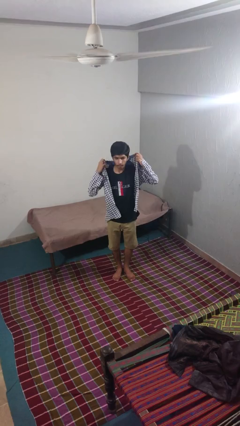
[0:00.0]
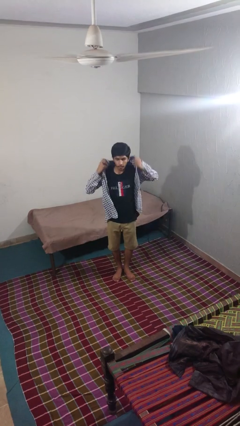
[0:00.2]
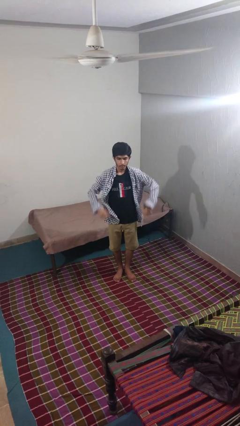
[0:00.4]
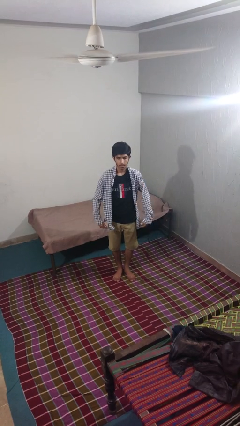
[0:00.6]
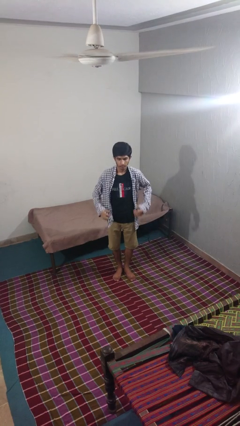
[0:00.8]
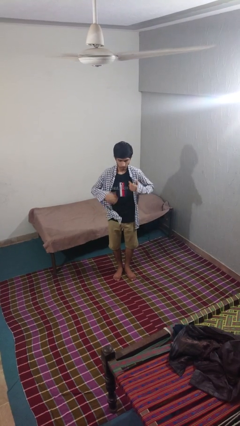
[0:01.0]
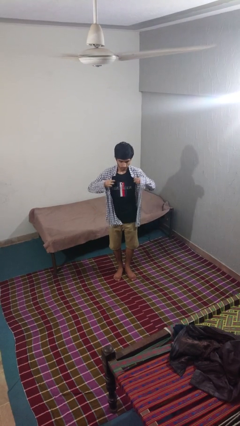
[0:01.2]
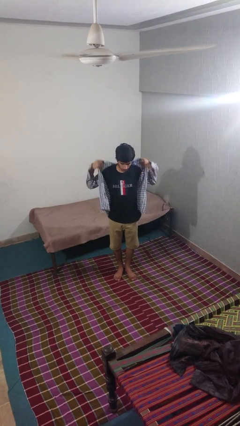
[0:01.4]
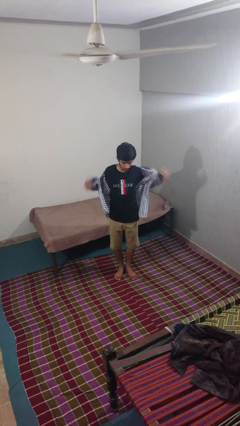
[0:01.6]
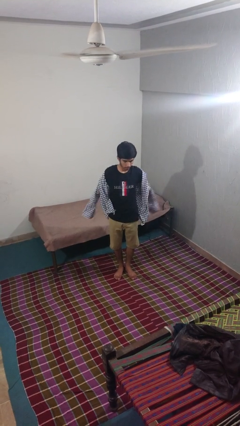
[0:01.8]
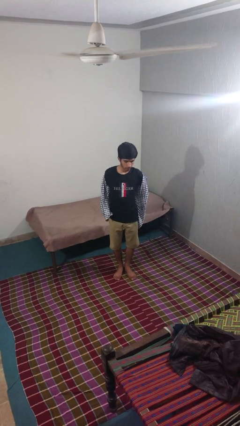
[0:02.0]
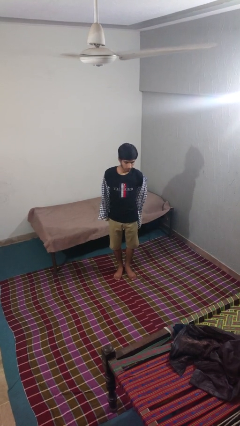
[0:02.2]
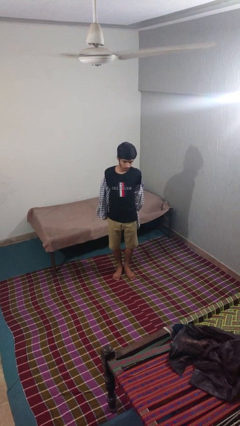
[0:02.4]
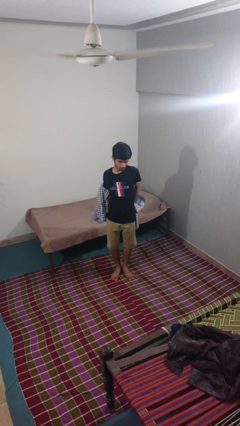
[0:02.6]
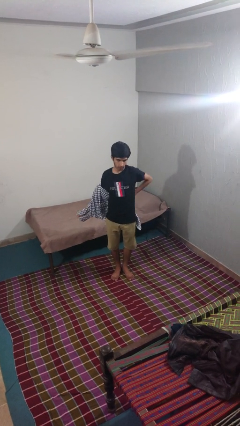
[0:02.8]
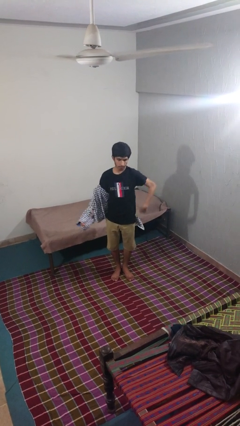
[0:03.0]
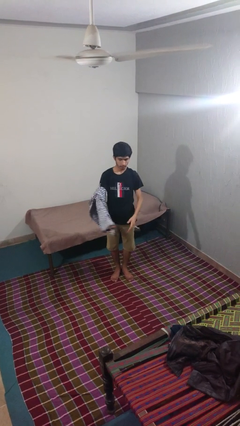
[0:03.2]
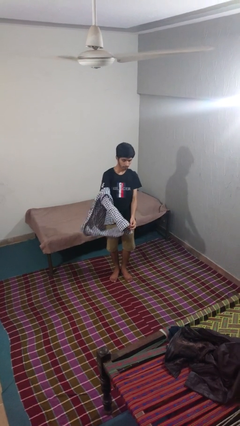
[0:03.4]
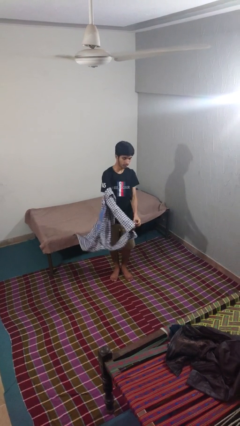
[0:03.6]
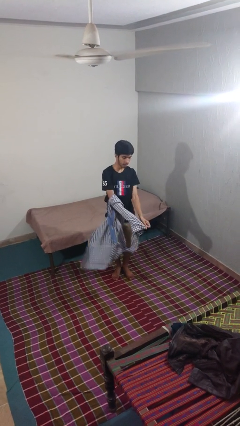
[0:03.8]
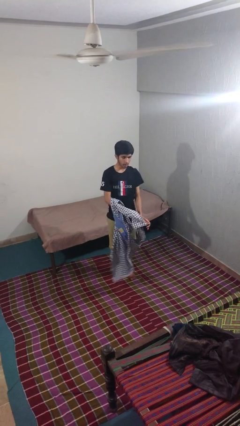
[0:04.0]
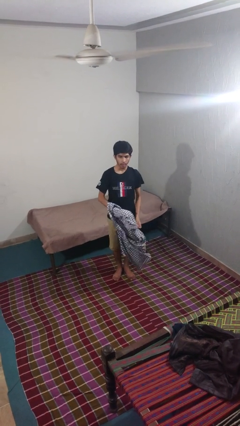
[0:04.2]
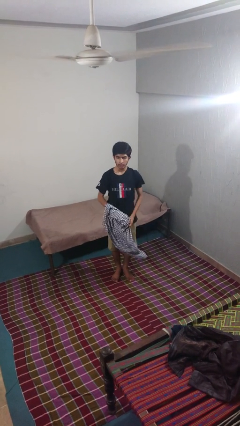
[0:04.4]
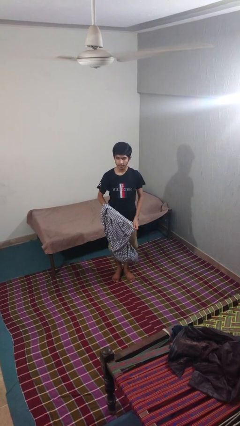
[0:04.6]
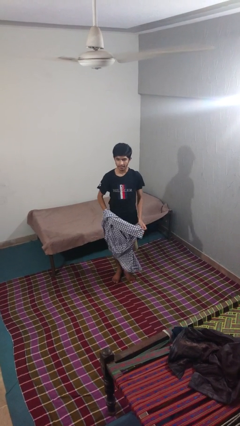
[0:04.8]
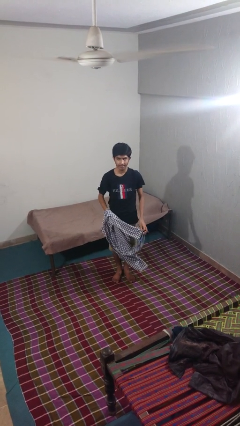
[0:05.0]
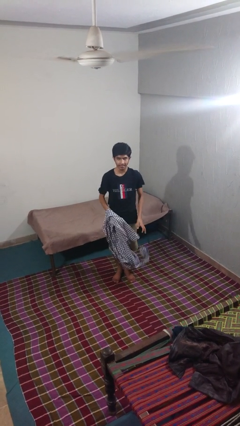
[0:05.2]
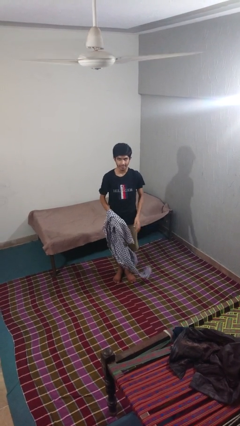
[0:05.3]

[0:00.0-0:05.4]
person takes off shirt

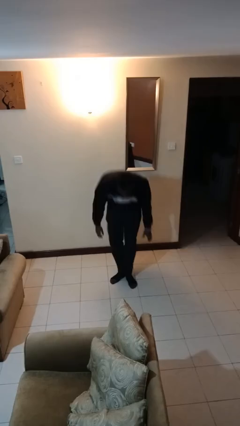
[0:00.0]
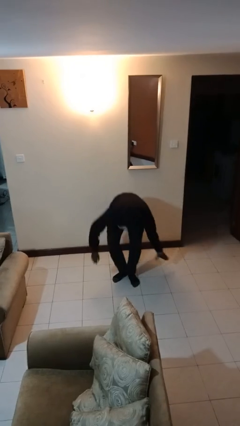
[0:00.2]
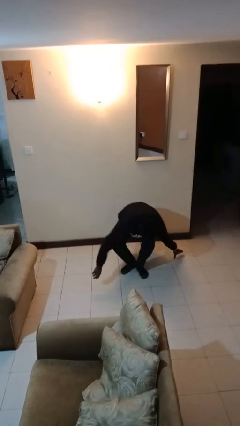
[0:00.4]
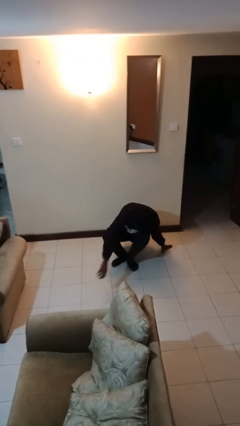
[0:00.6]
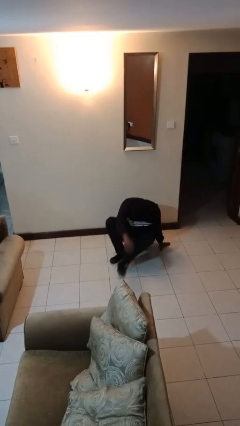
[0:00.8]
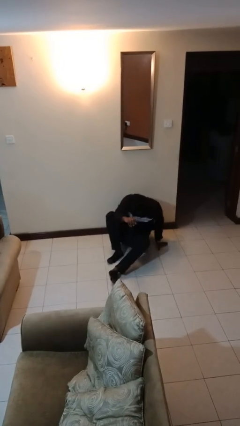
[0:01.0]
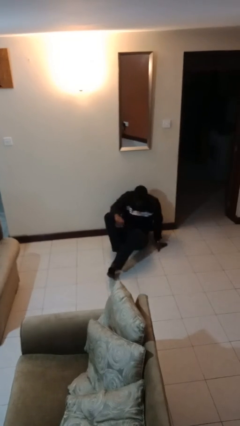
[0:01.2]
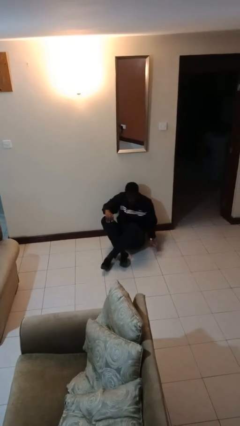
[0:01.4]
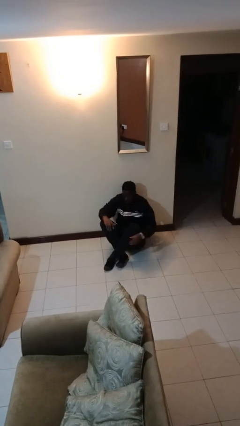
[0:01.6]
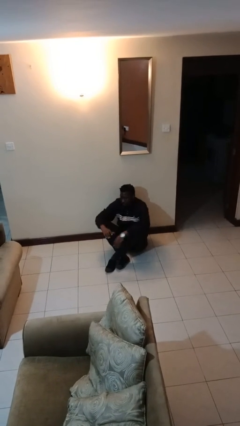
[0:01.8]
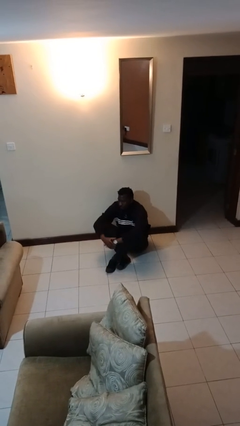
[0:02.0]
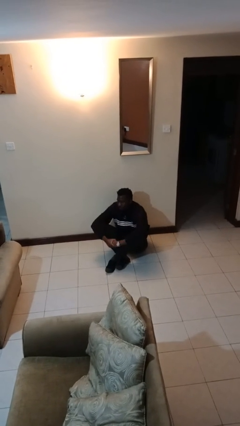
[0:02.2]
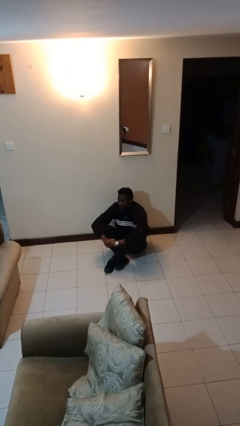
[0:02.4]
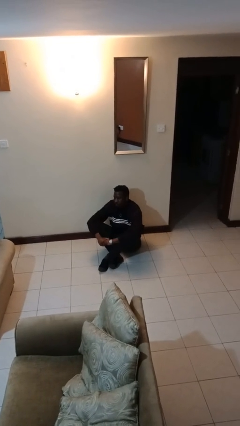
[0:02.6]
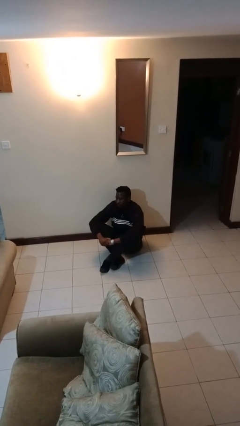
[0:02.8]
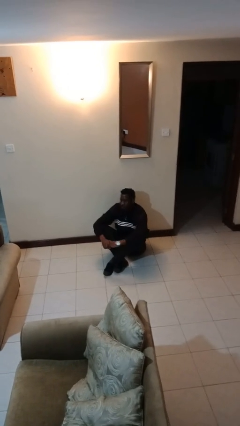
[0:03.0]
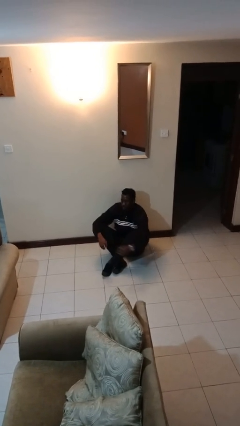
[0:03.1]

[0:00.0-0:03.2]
person sits crisscross

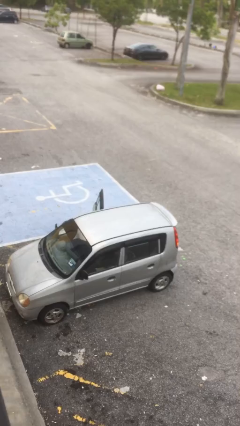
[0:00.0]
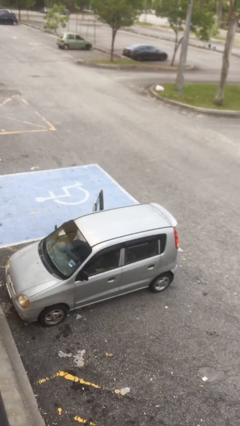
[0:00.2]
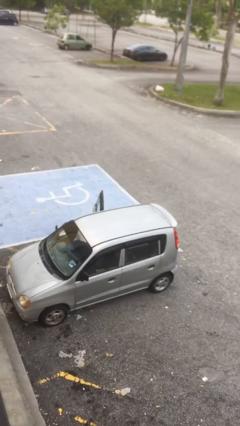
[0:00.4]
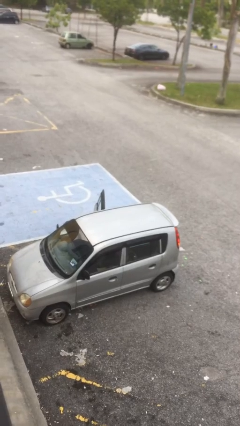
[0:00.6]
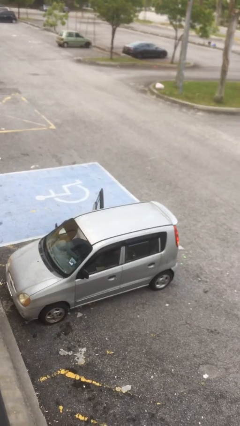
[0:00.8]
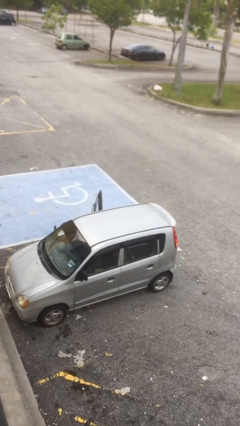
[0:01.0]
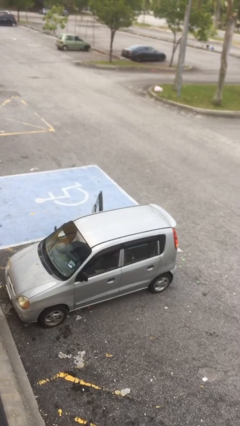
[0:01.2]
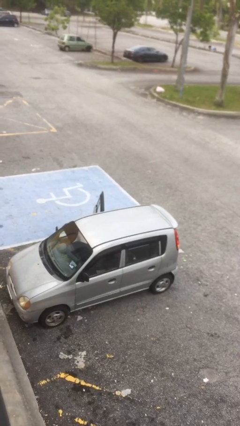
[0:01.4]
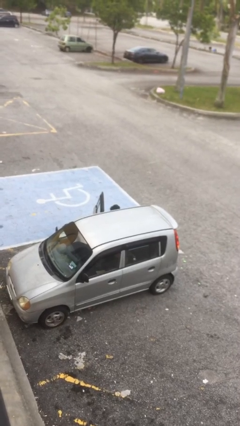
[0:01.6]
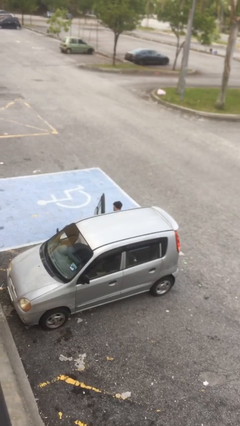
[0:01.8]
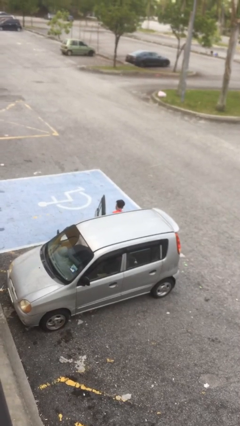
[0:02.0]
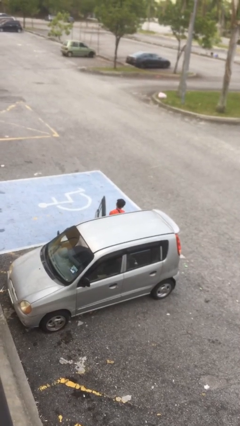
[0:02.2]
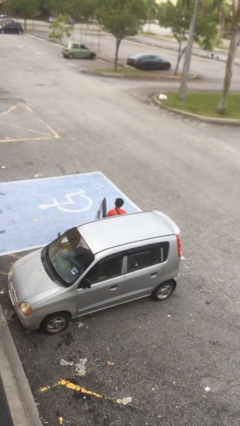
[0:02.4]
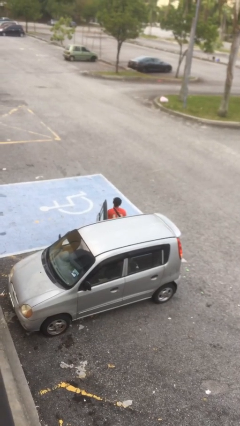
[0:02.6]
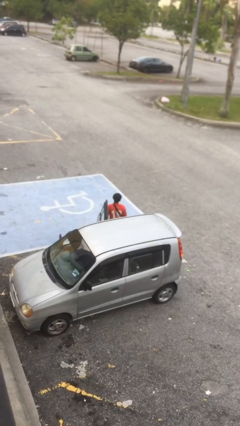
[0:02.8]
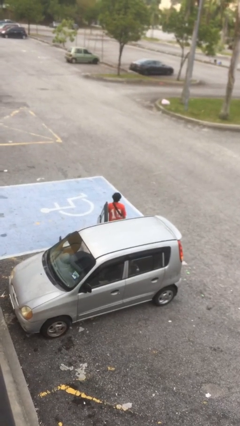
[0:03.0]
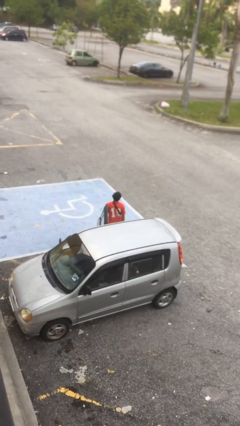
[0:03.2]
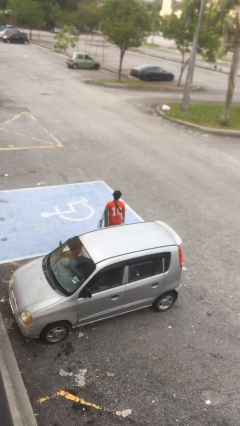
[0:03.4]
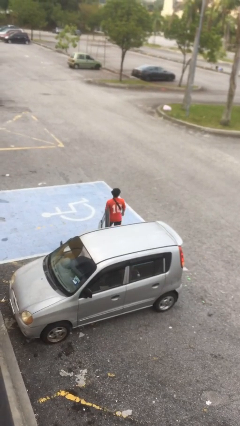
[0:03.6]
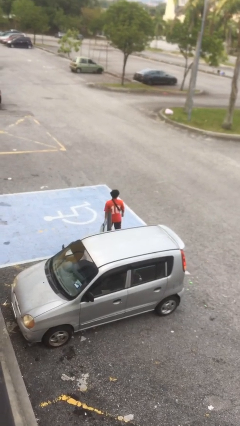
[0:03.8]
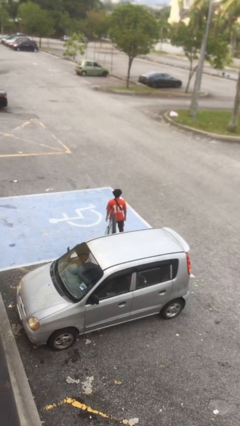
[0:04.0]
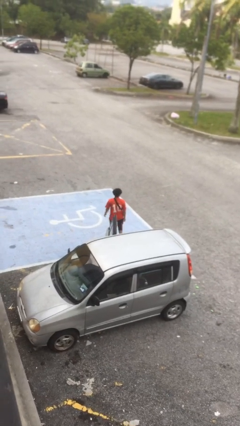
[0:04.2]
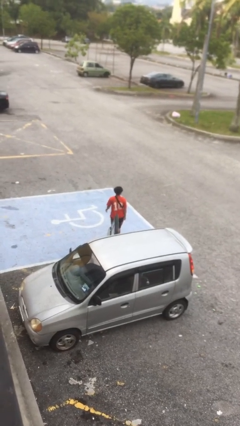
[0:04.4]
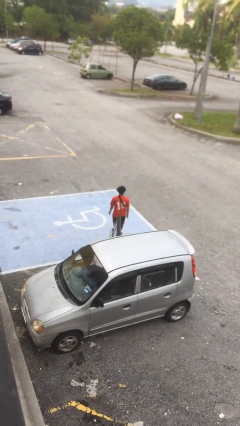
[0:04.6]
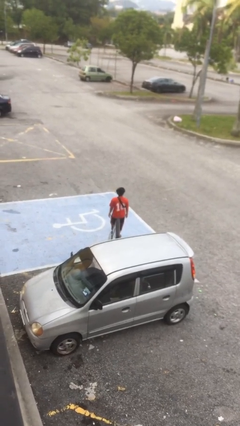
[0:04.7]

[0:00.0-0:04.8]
person exits car

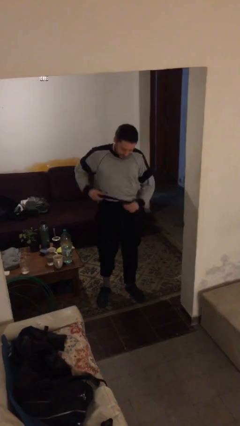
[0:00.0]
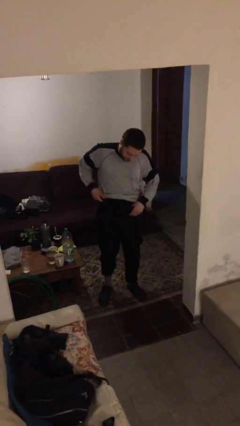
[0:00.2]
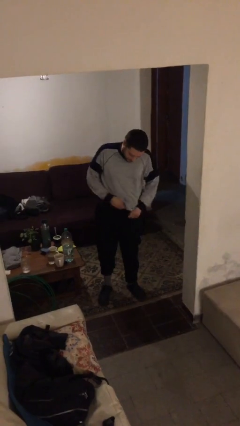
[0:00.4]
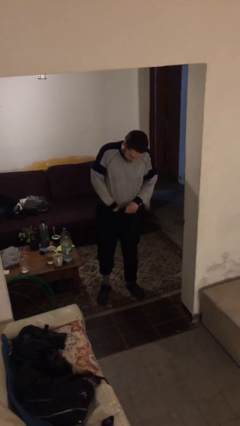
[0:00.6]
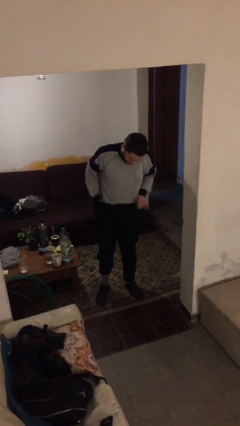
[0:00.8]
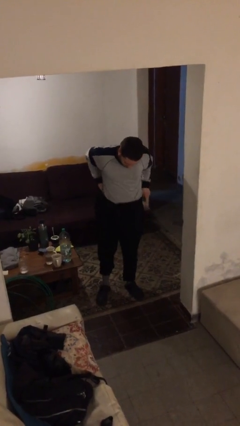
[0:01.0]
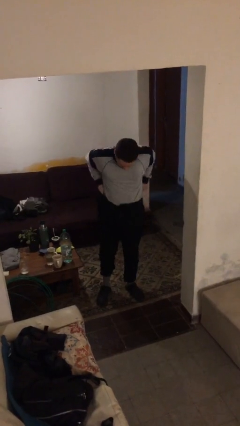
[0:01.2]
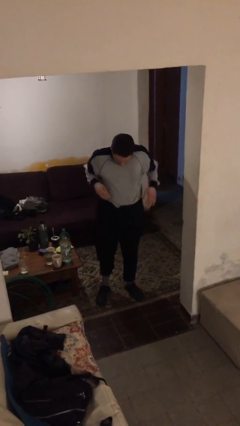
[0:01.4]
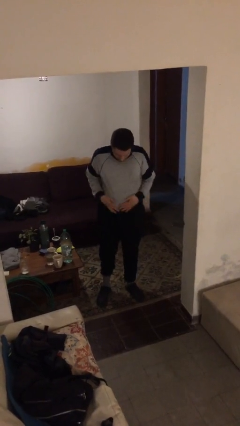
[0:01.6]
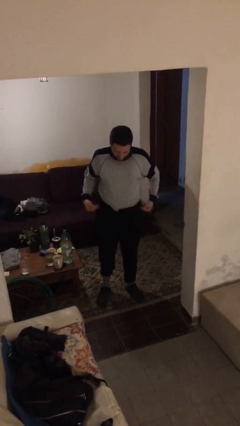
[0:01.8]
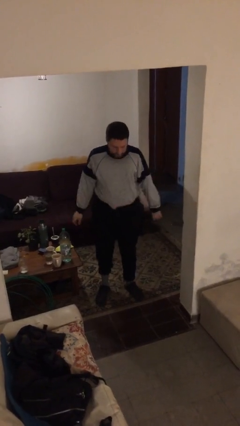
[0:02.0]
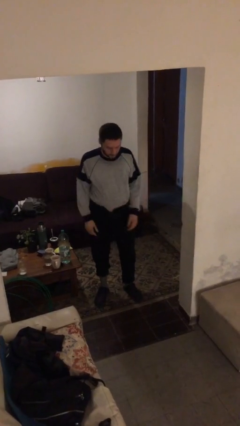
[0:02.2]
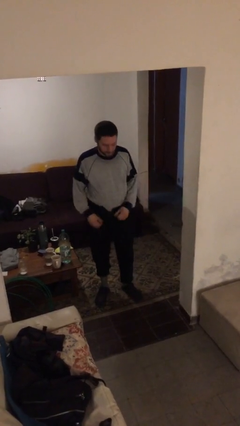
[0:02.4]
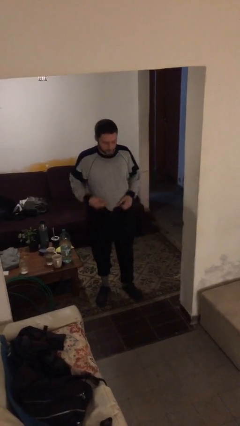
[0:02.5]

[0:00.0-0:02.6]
person tucks in shirt

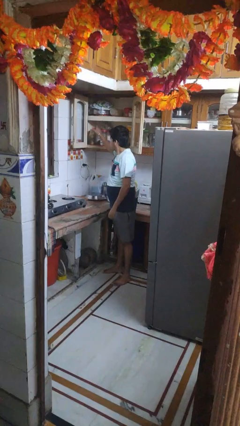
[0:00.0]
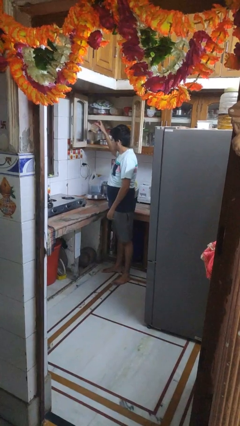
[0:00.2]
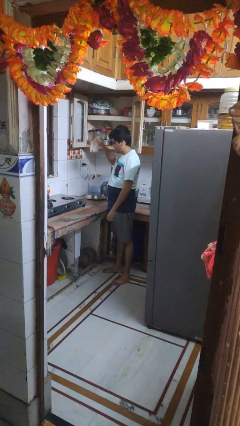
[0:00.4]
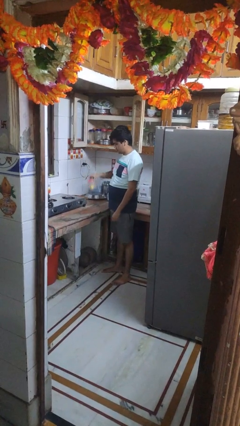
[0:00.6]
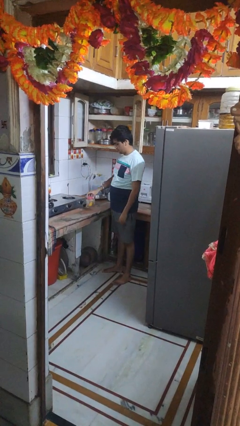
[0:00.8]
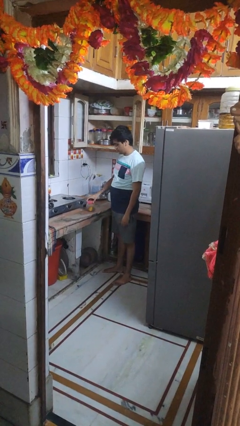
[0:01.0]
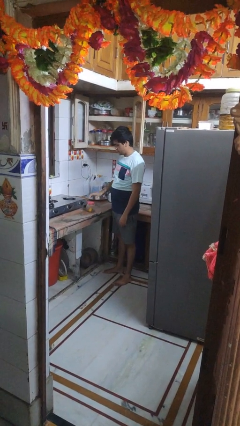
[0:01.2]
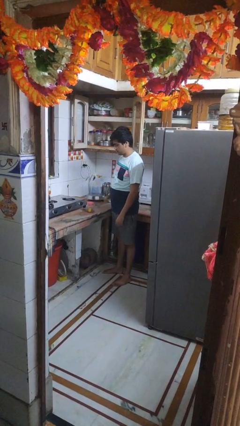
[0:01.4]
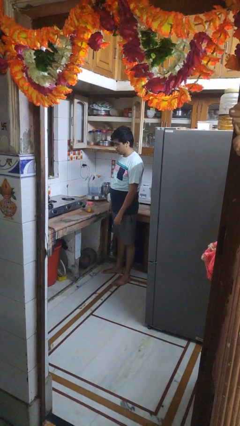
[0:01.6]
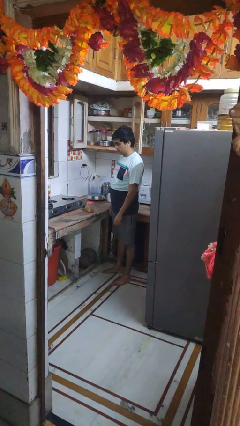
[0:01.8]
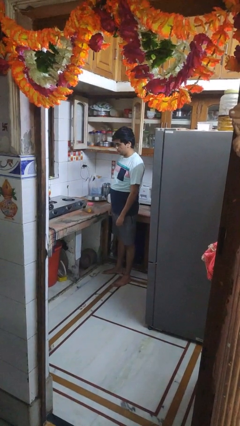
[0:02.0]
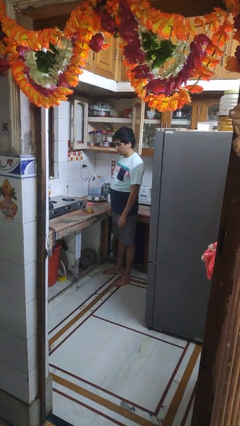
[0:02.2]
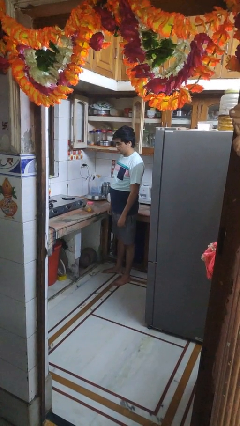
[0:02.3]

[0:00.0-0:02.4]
person takes object from cabinet
